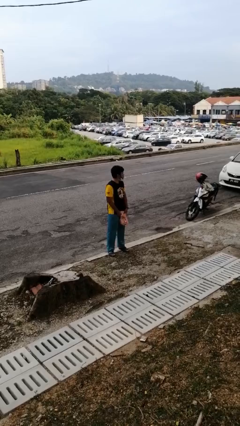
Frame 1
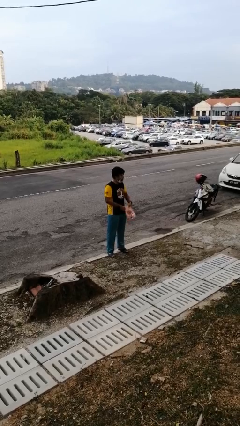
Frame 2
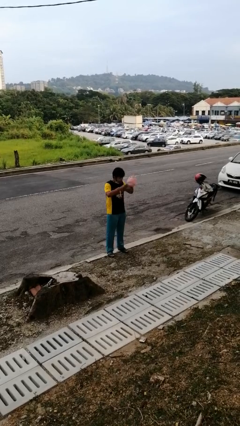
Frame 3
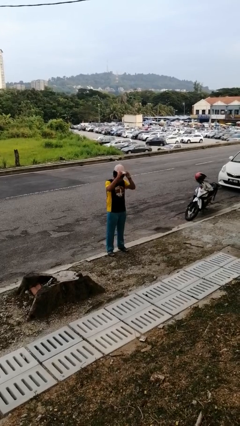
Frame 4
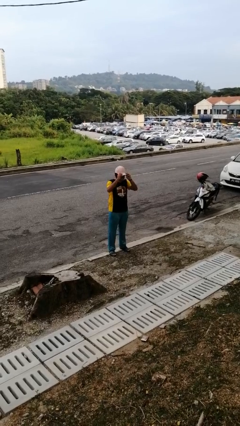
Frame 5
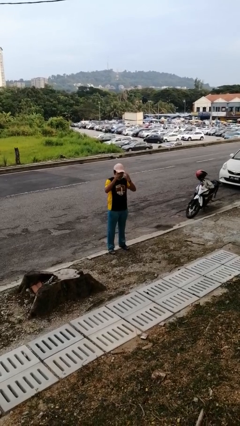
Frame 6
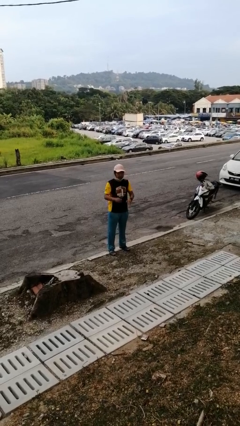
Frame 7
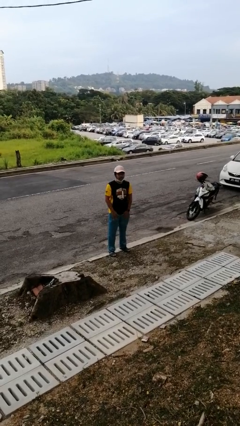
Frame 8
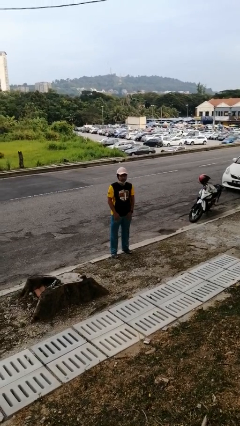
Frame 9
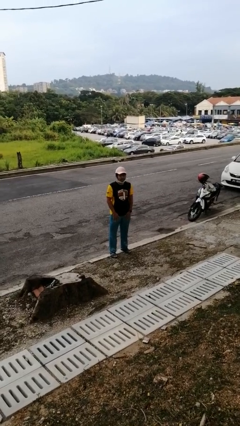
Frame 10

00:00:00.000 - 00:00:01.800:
person puts on hat

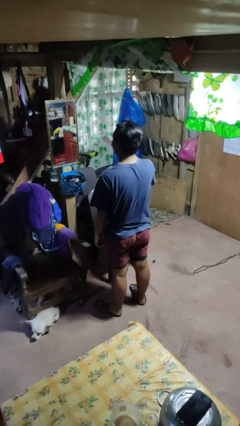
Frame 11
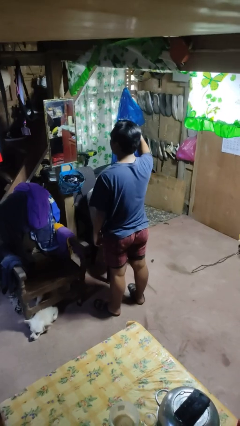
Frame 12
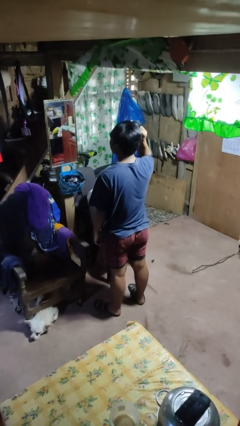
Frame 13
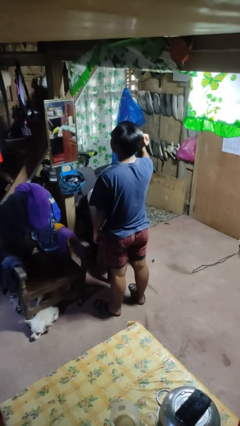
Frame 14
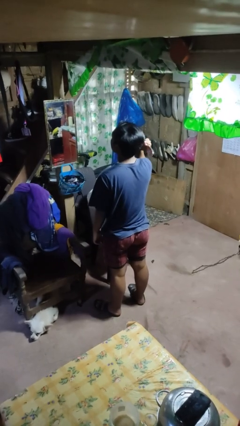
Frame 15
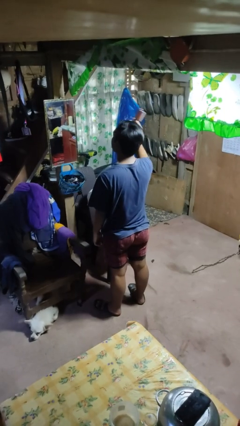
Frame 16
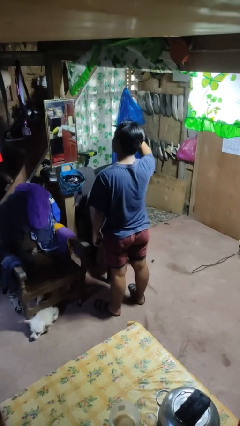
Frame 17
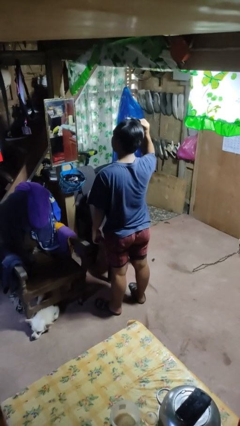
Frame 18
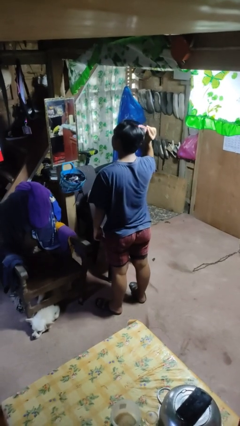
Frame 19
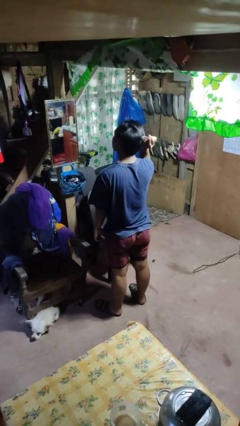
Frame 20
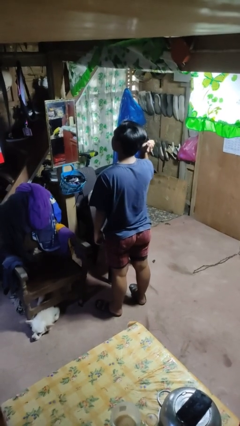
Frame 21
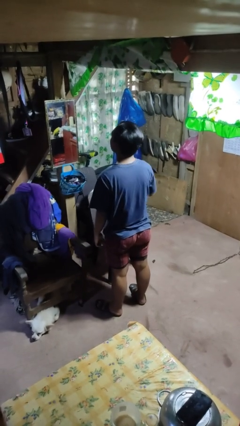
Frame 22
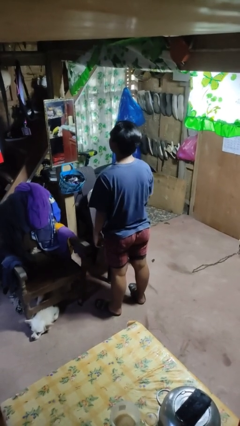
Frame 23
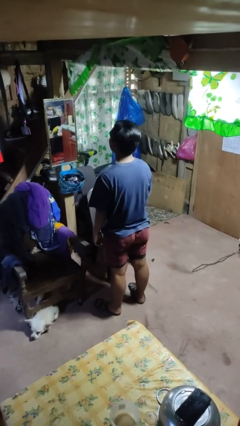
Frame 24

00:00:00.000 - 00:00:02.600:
person brushes hair

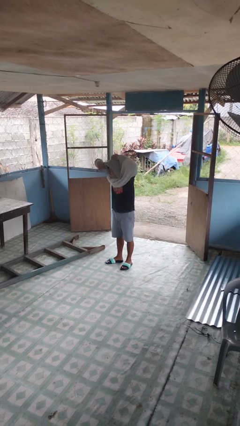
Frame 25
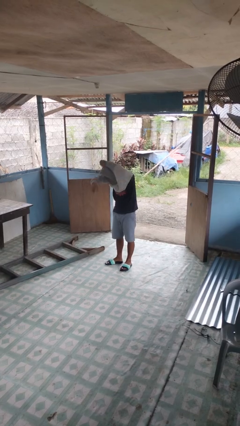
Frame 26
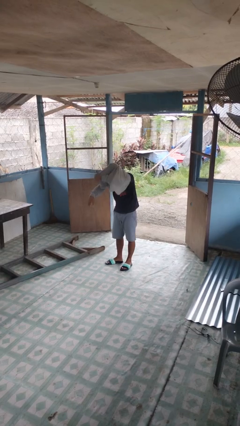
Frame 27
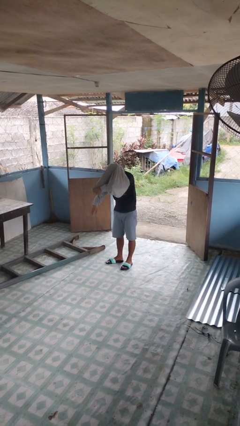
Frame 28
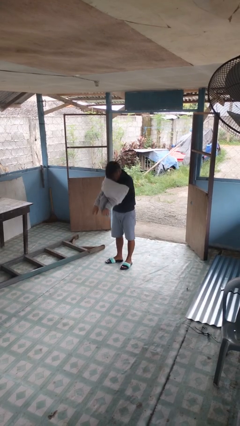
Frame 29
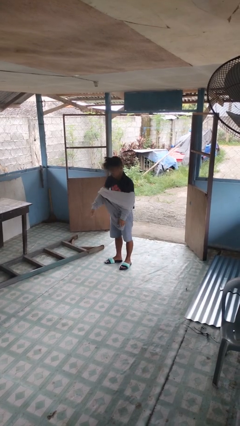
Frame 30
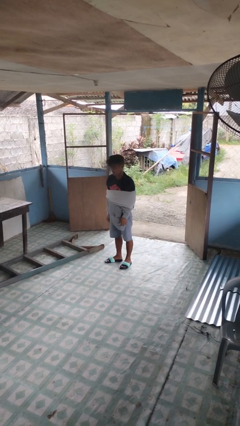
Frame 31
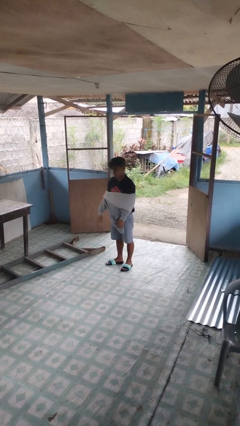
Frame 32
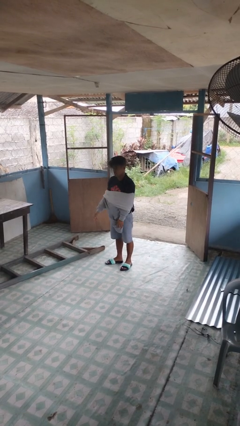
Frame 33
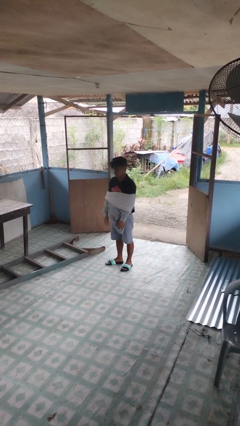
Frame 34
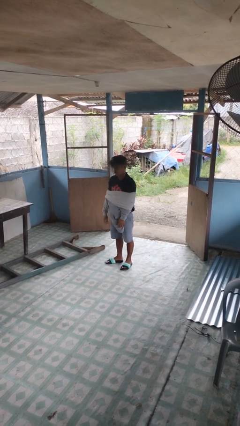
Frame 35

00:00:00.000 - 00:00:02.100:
person takes off hoodie

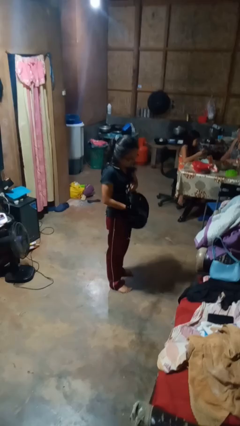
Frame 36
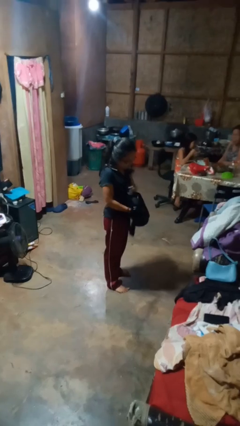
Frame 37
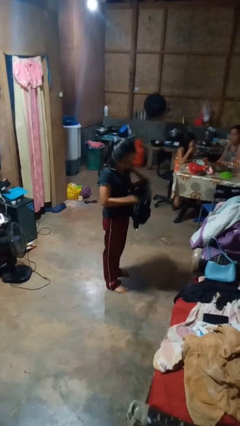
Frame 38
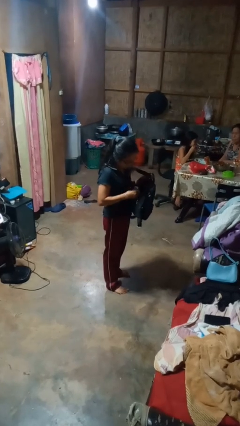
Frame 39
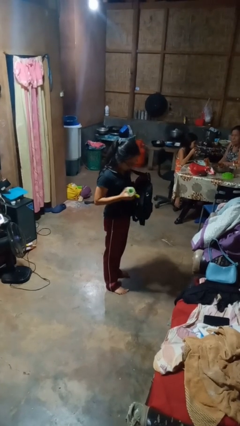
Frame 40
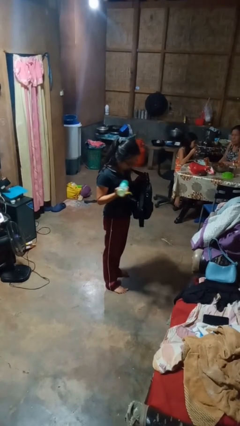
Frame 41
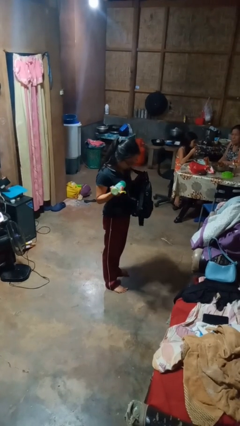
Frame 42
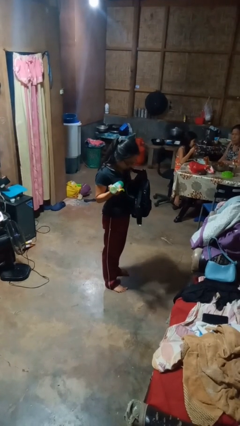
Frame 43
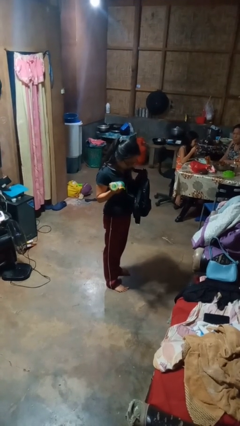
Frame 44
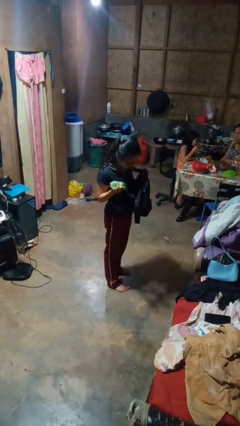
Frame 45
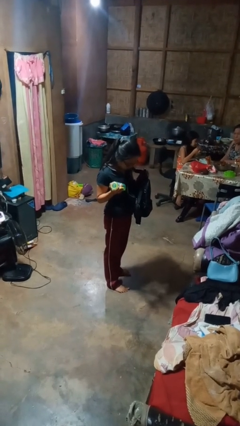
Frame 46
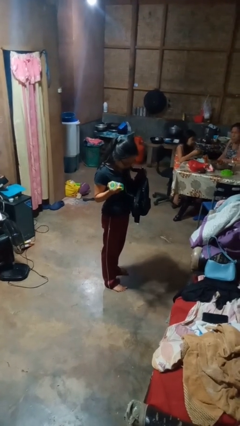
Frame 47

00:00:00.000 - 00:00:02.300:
person takes object from backpack

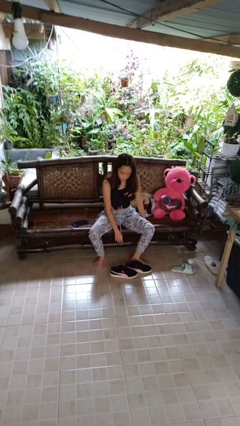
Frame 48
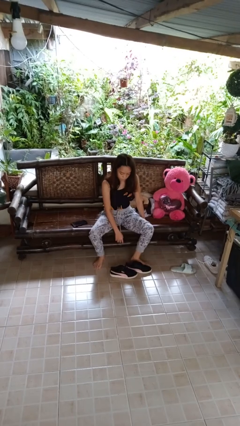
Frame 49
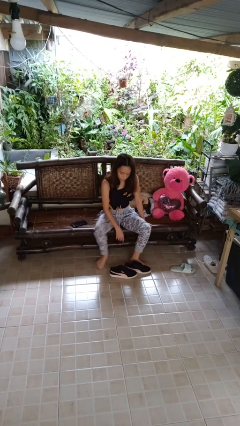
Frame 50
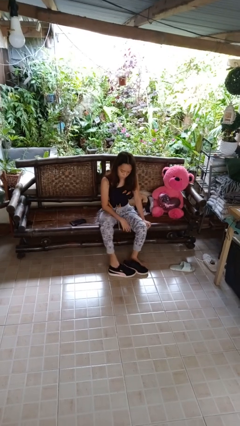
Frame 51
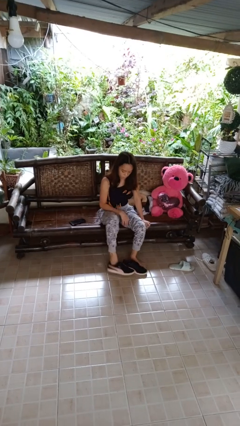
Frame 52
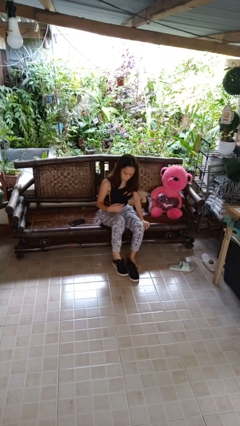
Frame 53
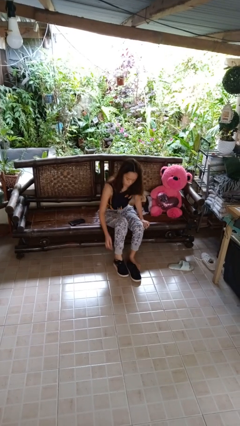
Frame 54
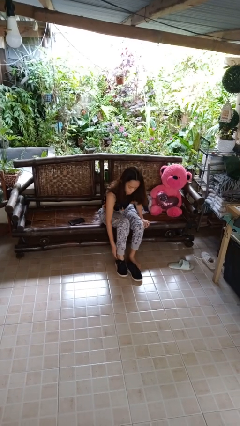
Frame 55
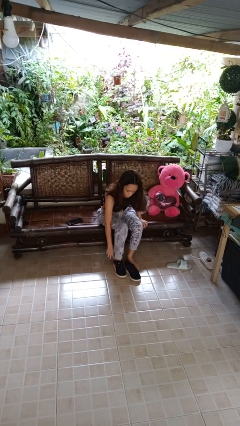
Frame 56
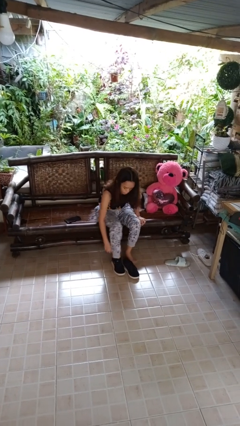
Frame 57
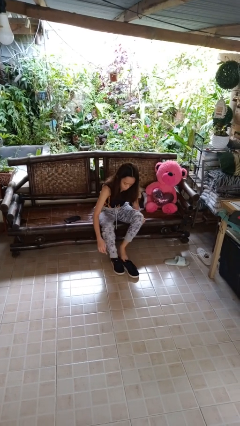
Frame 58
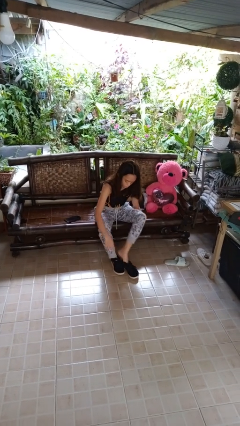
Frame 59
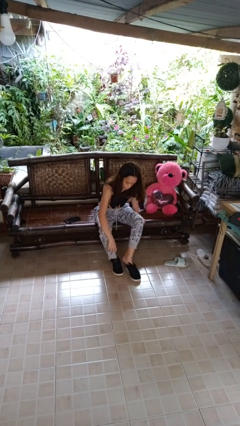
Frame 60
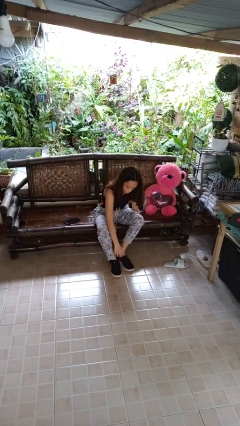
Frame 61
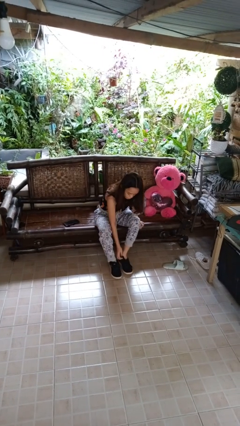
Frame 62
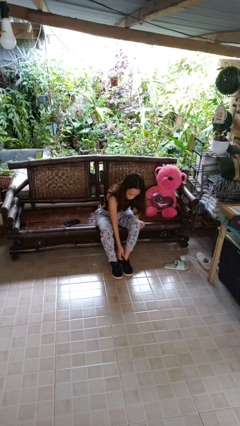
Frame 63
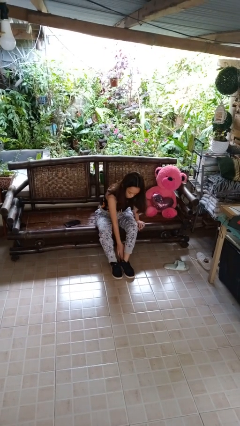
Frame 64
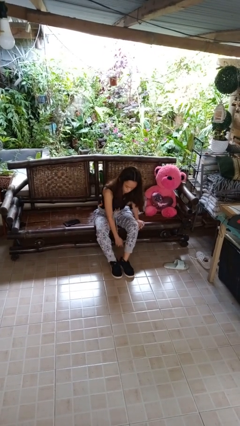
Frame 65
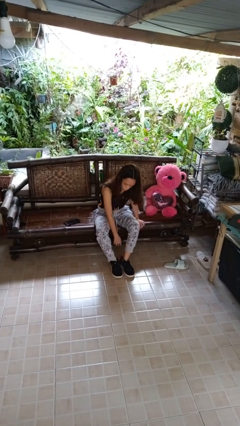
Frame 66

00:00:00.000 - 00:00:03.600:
person puts on shoes

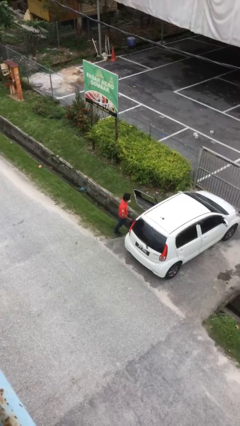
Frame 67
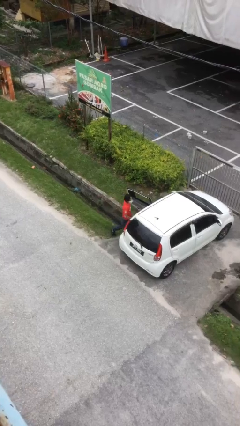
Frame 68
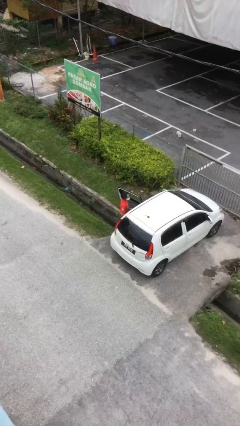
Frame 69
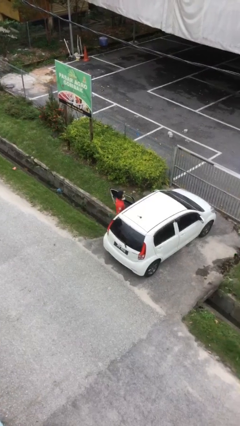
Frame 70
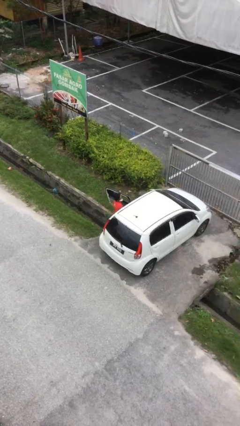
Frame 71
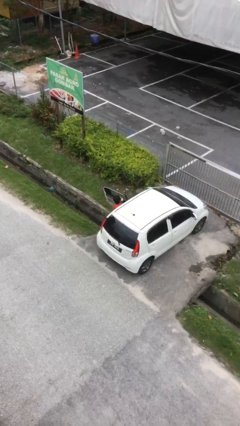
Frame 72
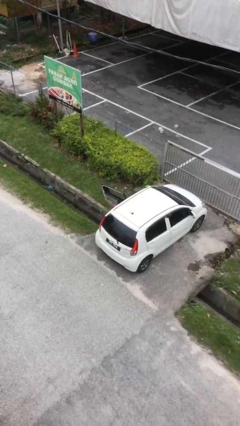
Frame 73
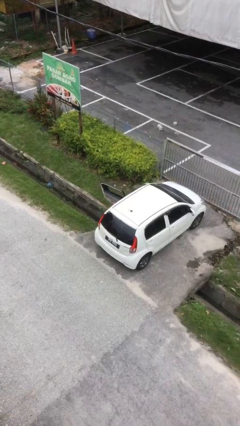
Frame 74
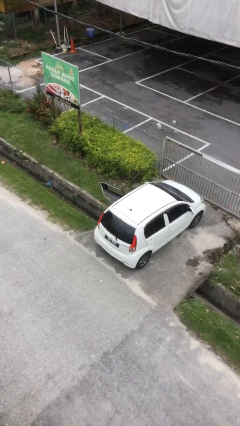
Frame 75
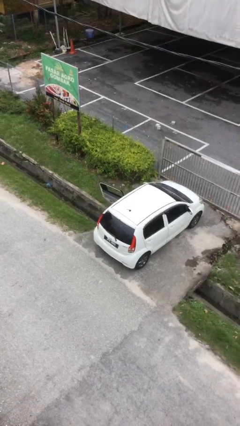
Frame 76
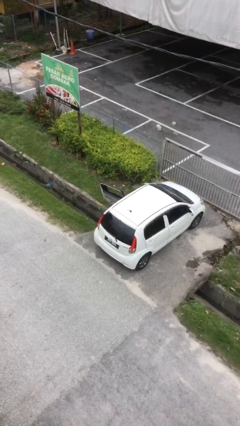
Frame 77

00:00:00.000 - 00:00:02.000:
person enters car

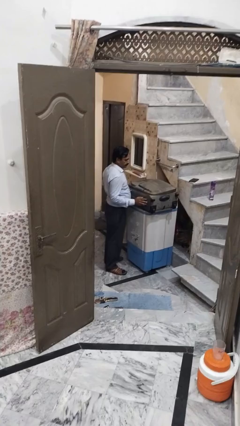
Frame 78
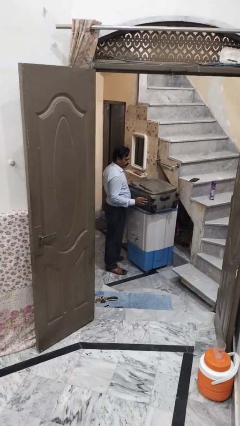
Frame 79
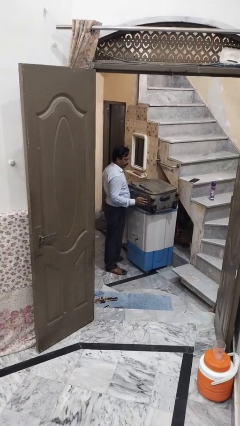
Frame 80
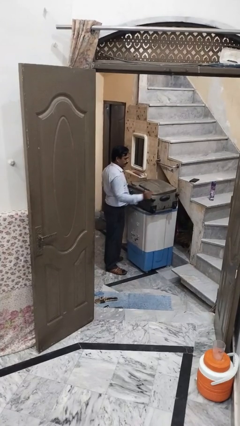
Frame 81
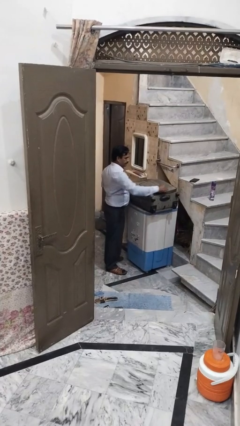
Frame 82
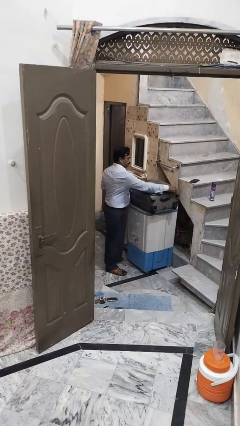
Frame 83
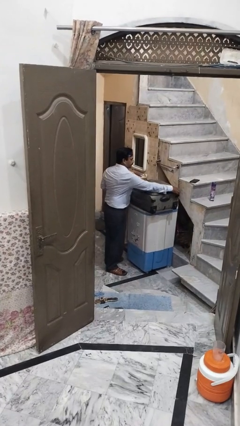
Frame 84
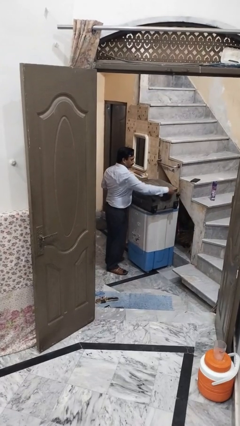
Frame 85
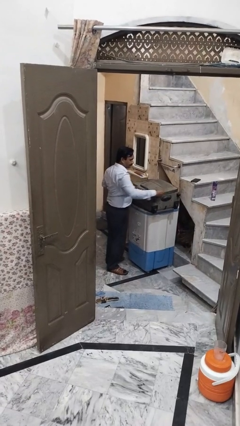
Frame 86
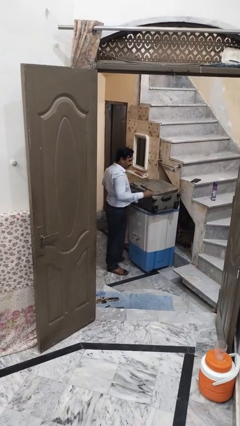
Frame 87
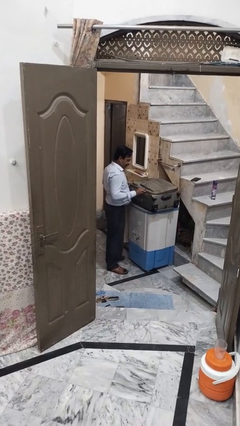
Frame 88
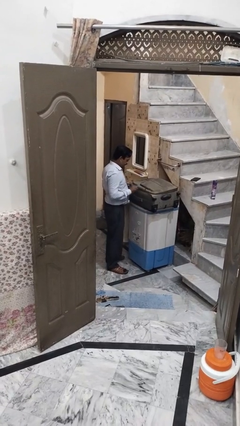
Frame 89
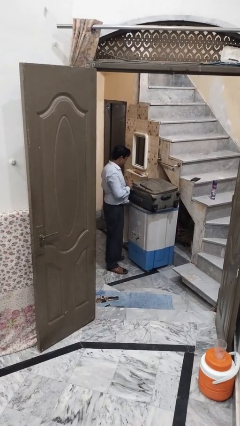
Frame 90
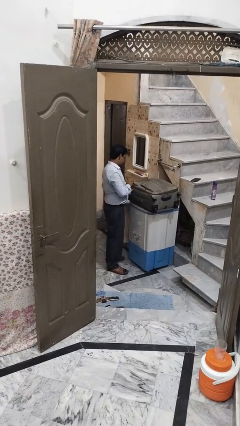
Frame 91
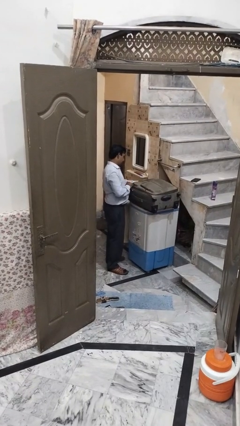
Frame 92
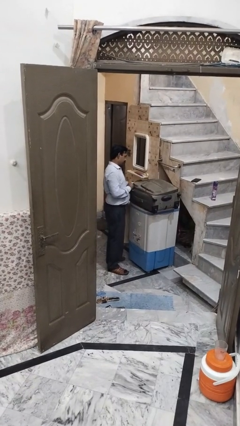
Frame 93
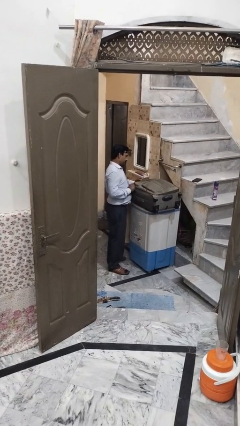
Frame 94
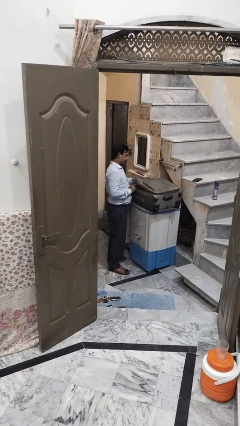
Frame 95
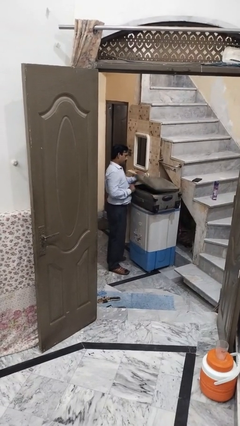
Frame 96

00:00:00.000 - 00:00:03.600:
person opens suitcase
